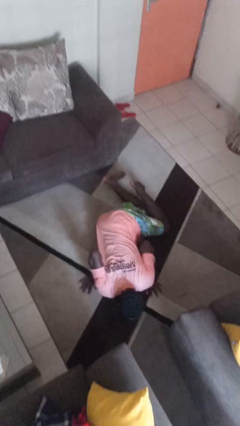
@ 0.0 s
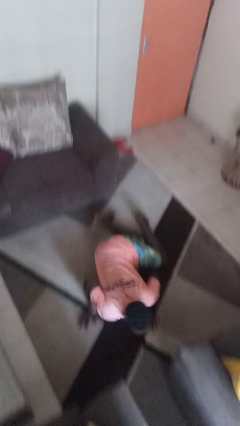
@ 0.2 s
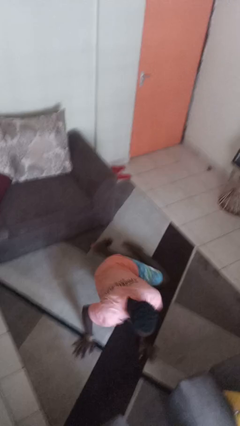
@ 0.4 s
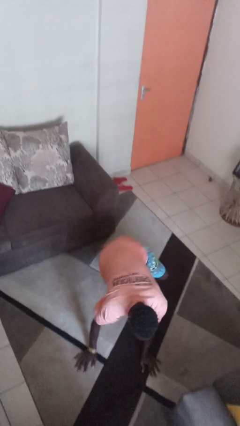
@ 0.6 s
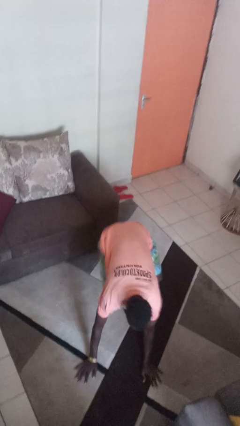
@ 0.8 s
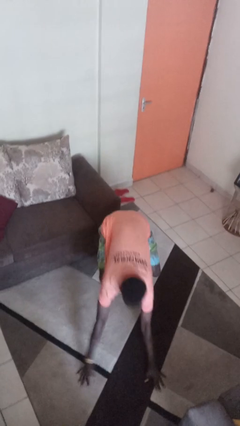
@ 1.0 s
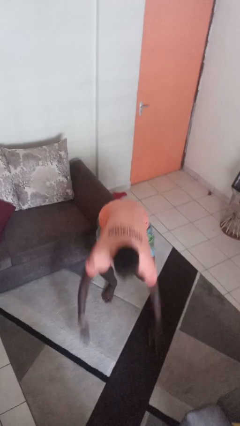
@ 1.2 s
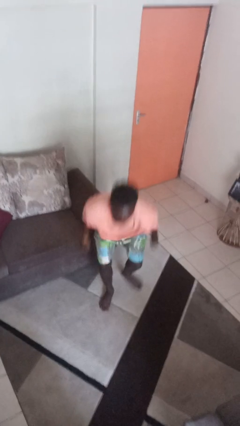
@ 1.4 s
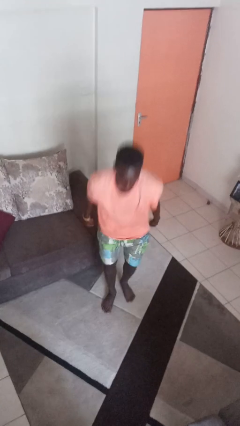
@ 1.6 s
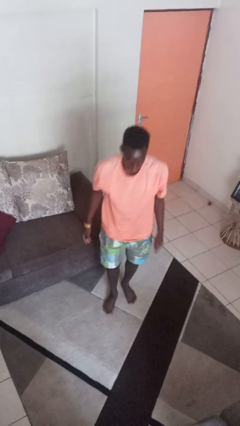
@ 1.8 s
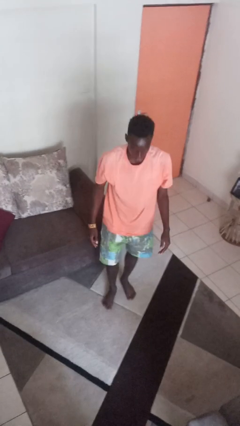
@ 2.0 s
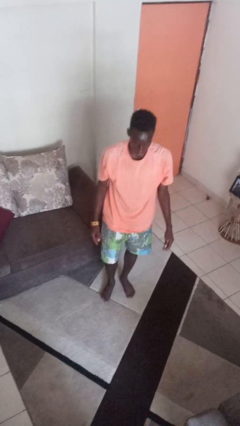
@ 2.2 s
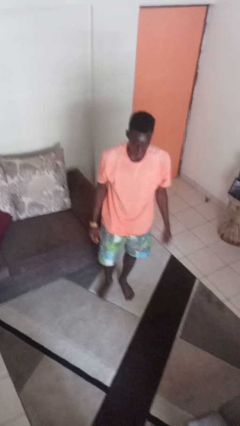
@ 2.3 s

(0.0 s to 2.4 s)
person stands up from floor

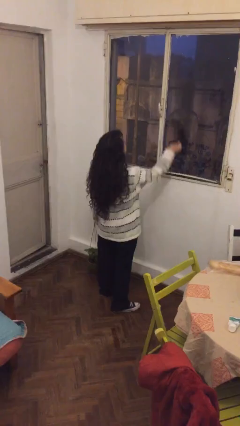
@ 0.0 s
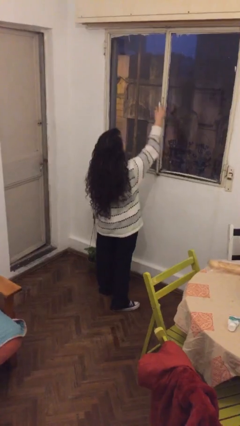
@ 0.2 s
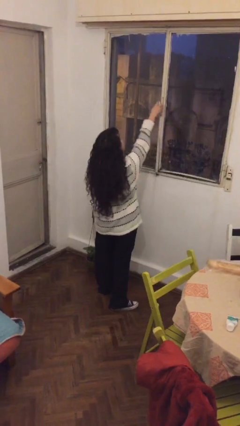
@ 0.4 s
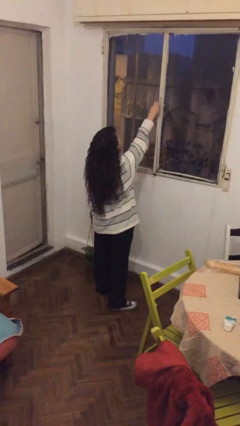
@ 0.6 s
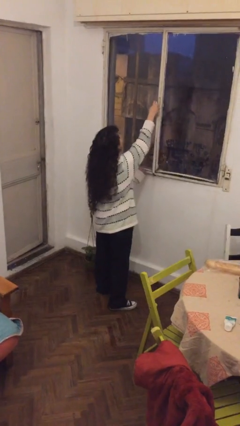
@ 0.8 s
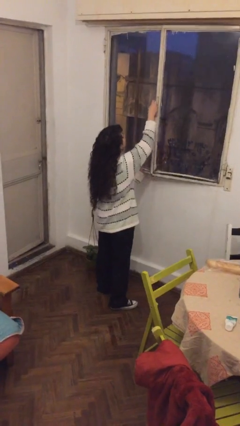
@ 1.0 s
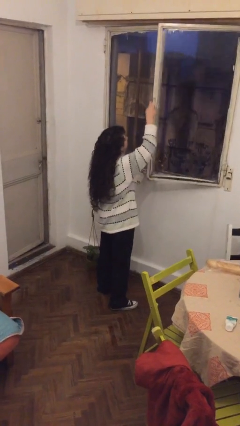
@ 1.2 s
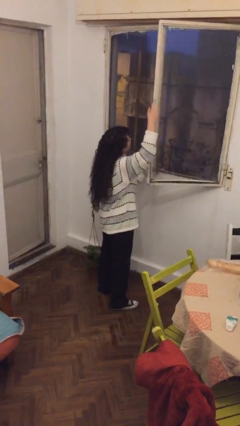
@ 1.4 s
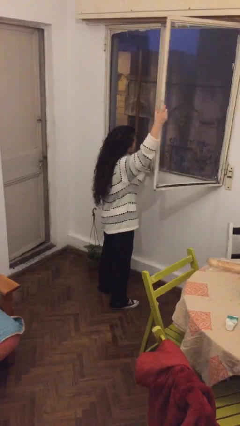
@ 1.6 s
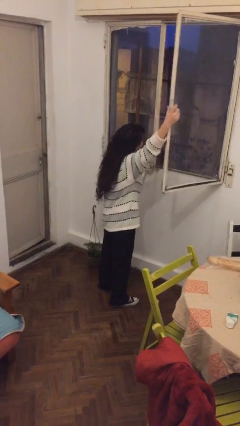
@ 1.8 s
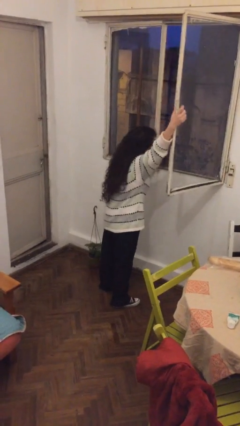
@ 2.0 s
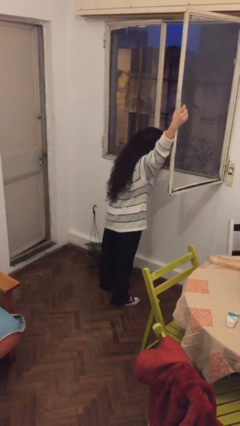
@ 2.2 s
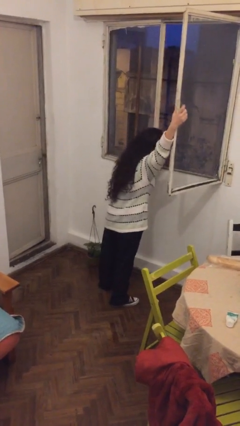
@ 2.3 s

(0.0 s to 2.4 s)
person opens home window

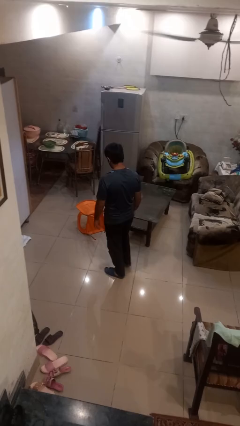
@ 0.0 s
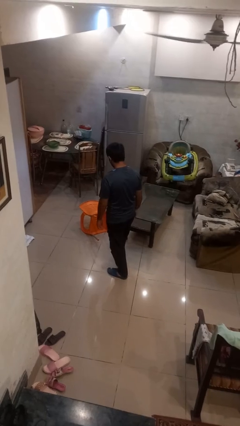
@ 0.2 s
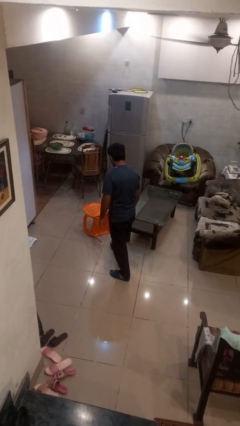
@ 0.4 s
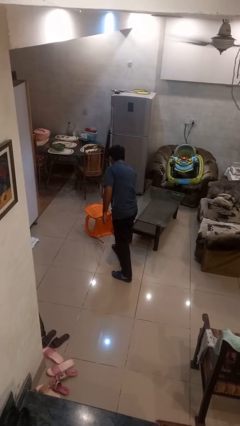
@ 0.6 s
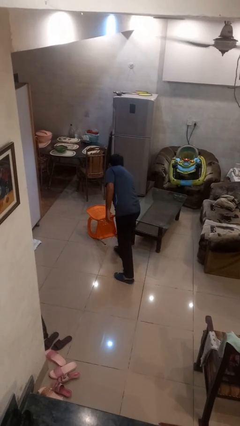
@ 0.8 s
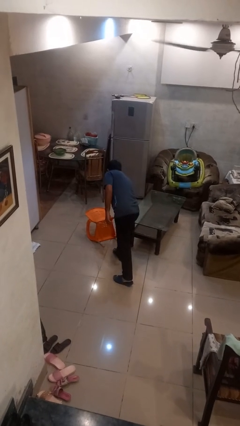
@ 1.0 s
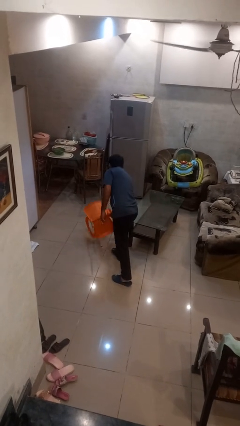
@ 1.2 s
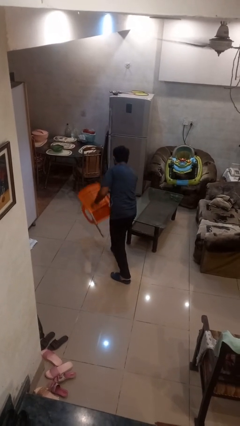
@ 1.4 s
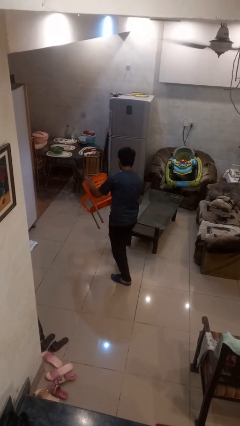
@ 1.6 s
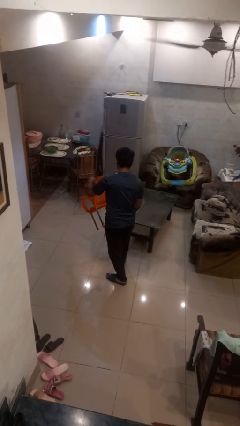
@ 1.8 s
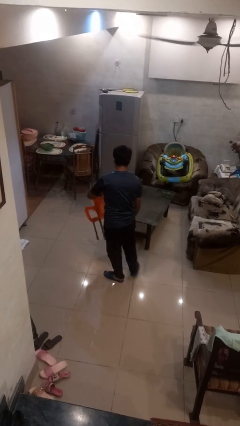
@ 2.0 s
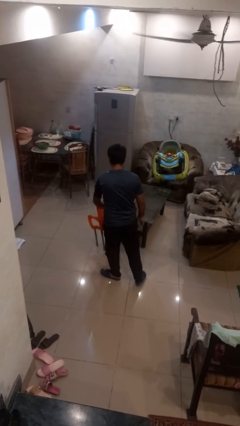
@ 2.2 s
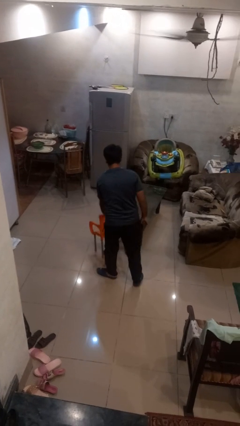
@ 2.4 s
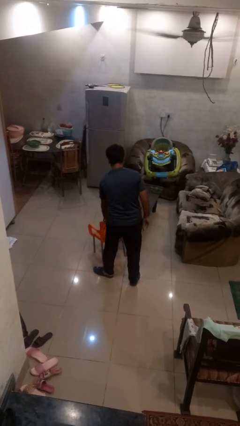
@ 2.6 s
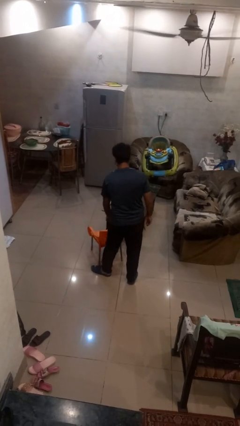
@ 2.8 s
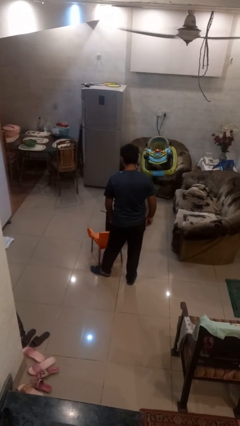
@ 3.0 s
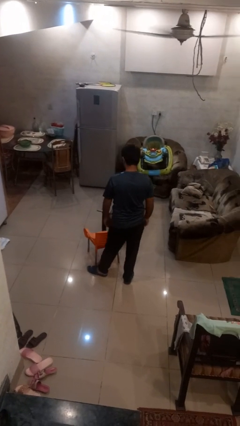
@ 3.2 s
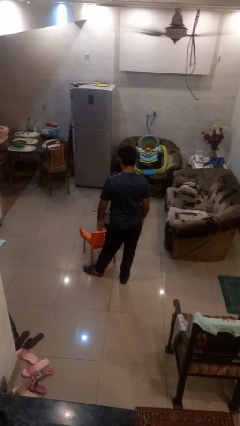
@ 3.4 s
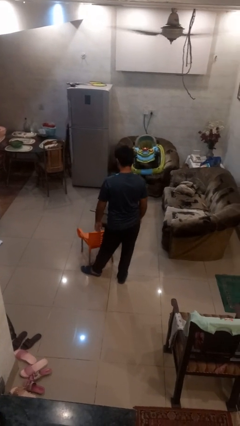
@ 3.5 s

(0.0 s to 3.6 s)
person sets upright furniture

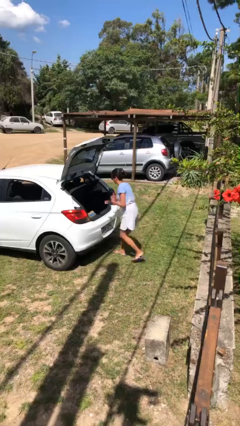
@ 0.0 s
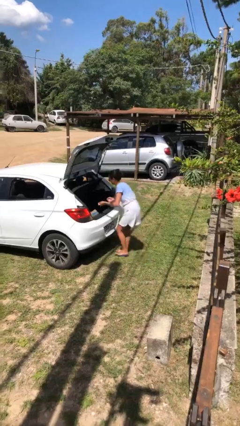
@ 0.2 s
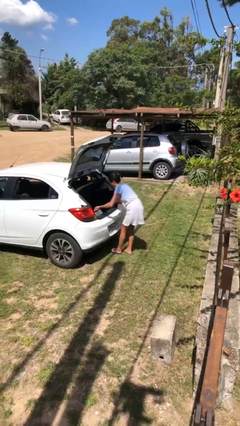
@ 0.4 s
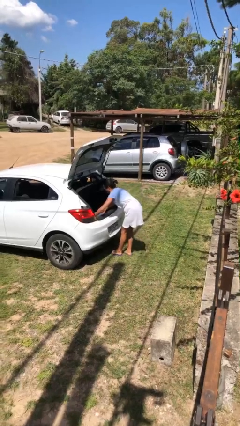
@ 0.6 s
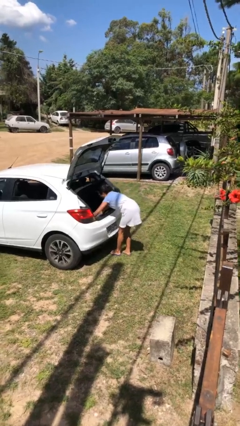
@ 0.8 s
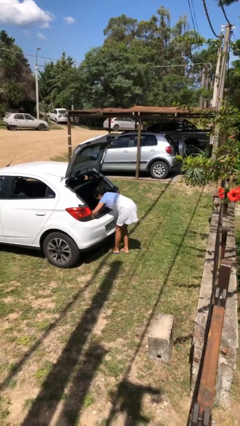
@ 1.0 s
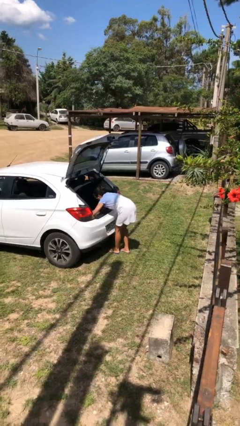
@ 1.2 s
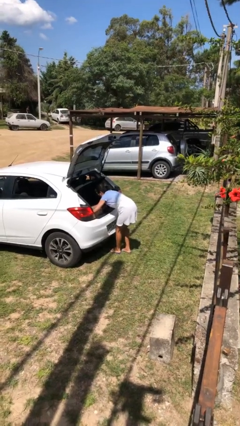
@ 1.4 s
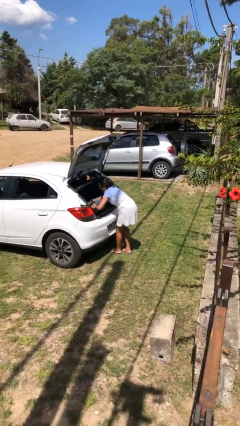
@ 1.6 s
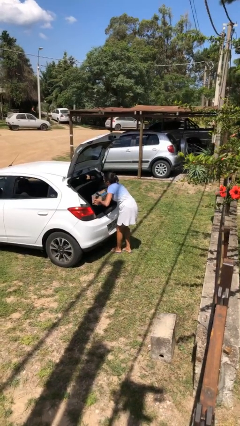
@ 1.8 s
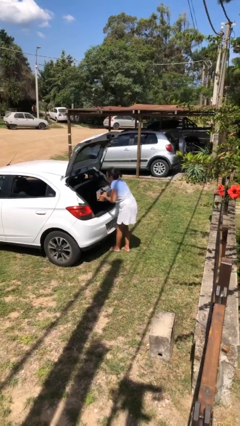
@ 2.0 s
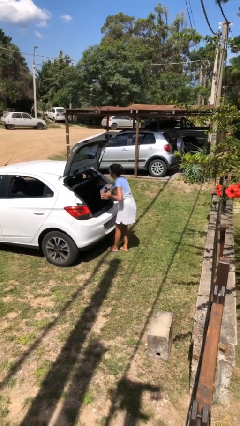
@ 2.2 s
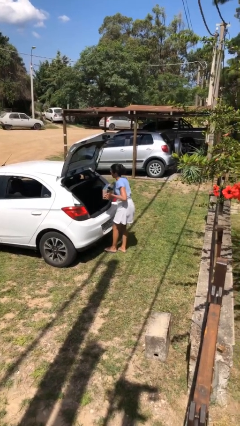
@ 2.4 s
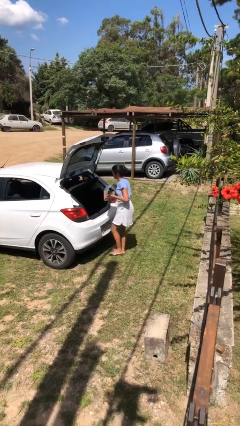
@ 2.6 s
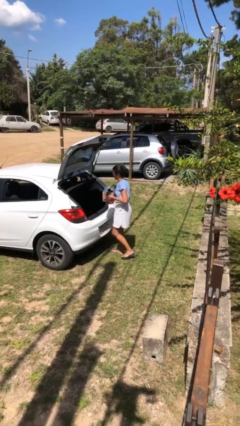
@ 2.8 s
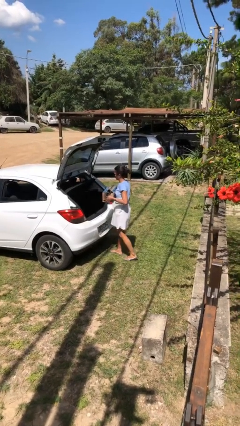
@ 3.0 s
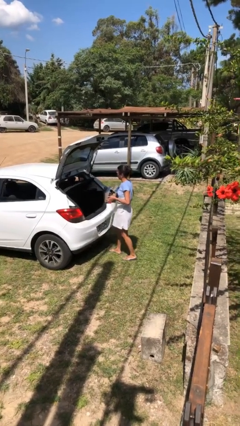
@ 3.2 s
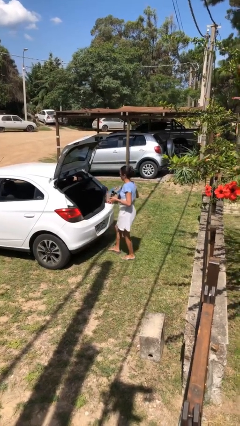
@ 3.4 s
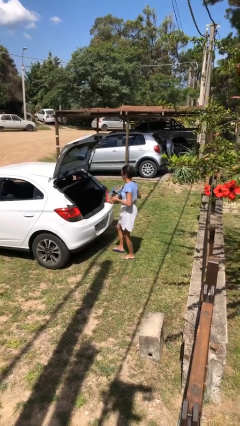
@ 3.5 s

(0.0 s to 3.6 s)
person unloads car

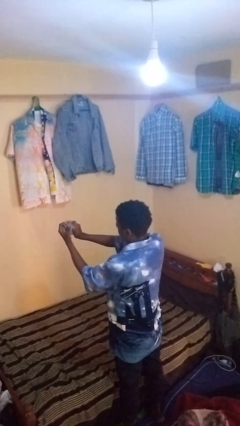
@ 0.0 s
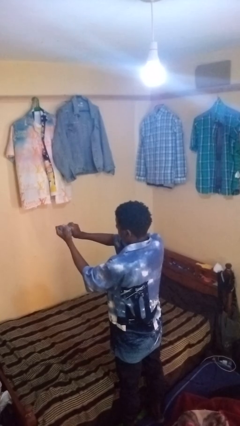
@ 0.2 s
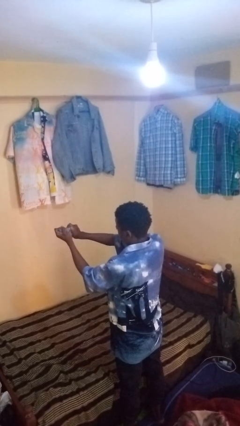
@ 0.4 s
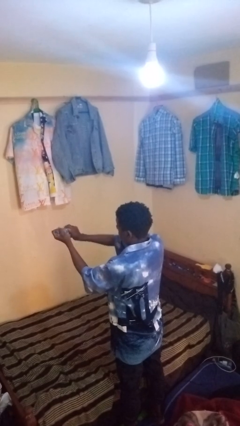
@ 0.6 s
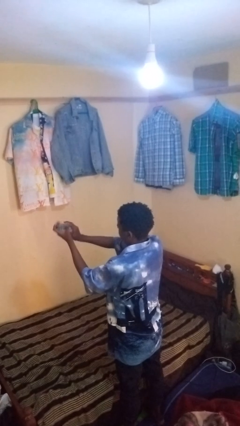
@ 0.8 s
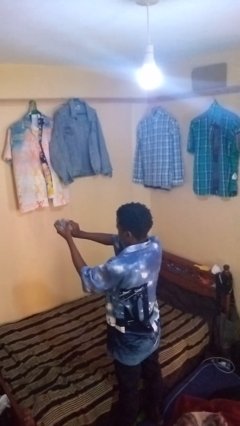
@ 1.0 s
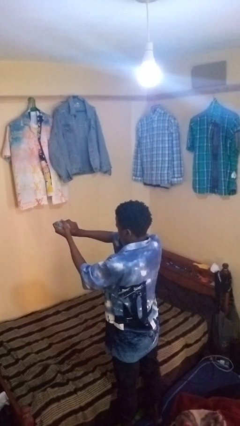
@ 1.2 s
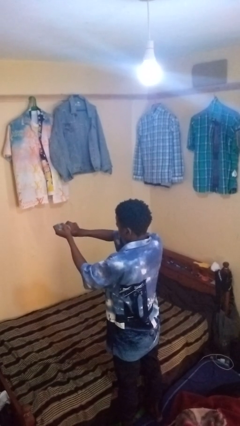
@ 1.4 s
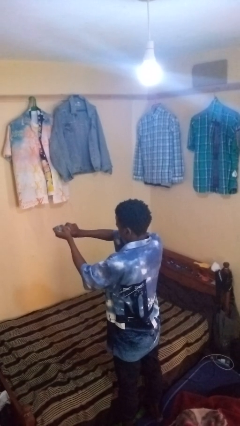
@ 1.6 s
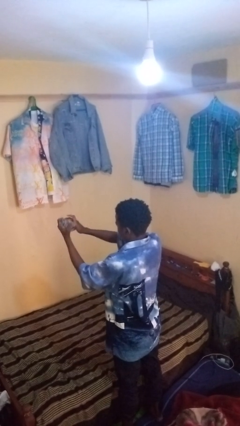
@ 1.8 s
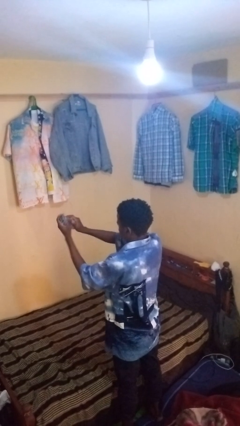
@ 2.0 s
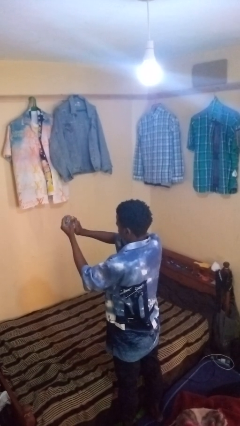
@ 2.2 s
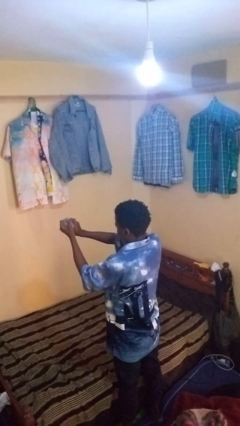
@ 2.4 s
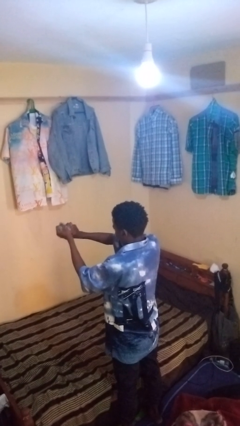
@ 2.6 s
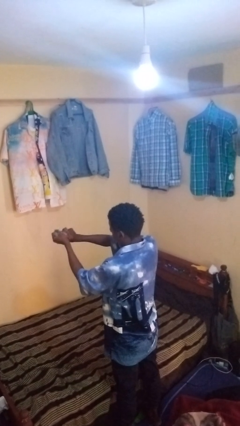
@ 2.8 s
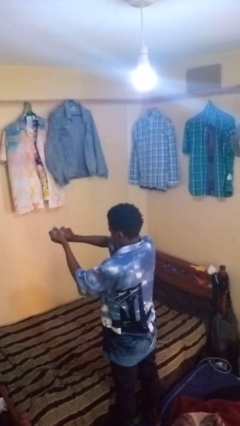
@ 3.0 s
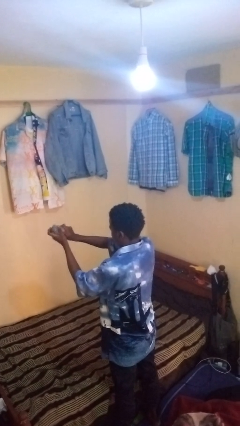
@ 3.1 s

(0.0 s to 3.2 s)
person squeezes object

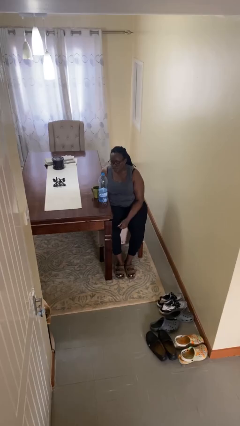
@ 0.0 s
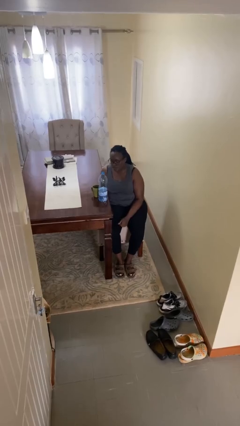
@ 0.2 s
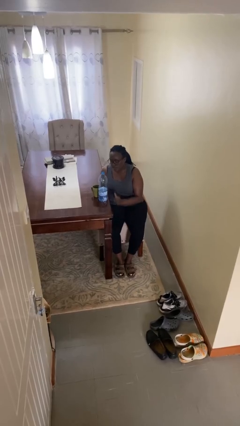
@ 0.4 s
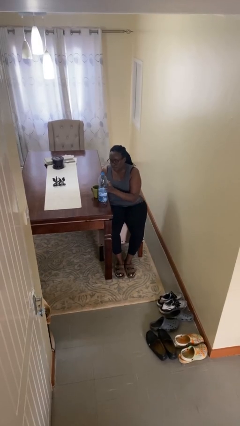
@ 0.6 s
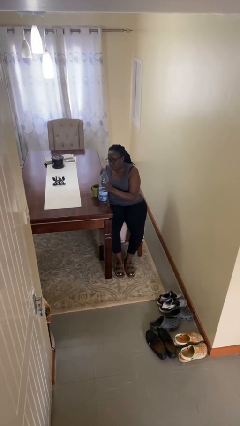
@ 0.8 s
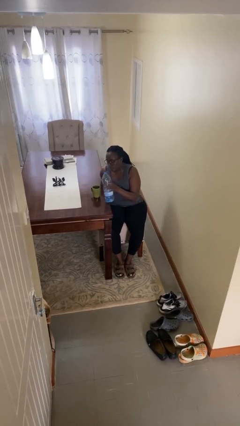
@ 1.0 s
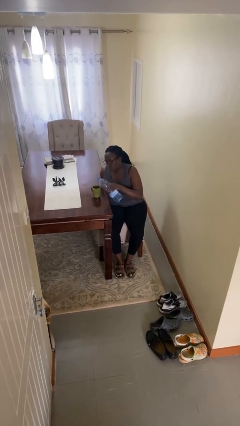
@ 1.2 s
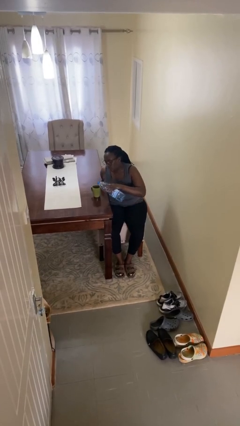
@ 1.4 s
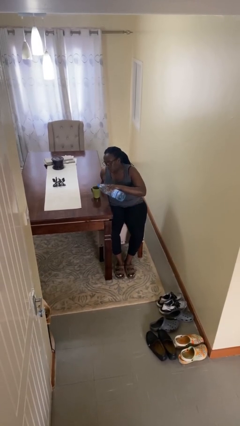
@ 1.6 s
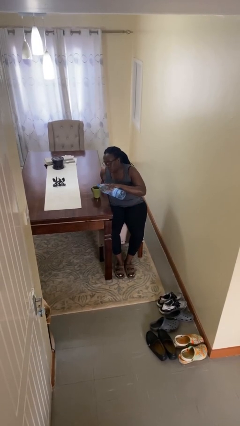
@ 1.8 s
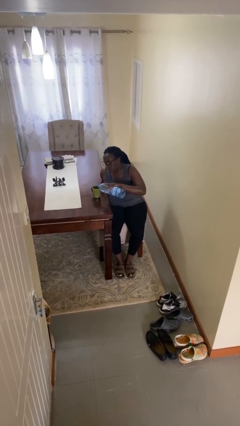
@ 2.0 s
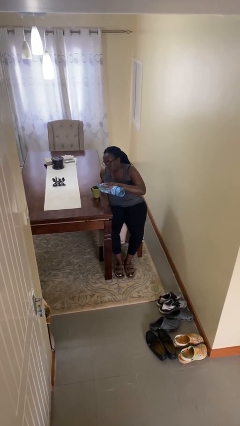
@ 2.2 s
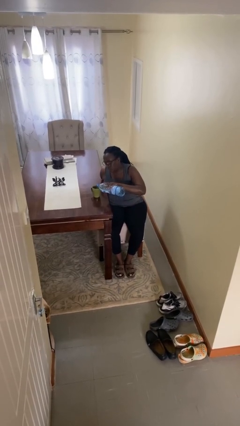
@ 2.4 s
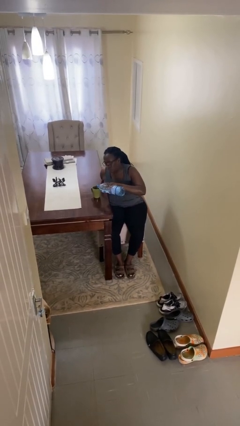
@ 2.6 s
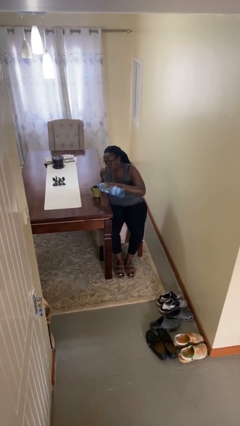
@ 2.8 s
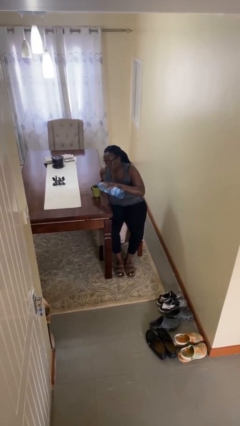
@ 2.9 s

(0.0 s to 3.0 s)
person pours liquid into cup
